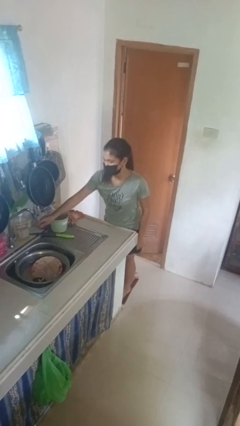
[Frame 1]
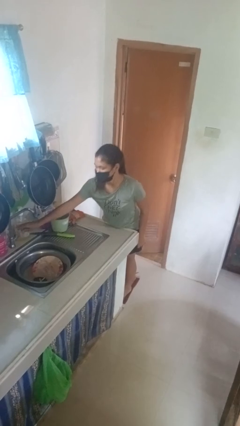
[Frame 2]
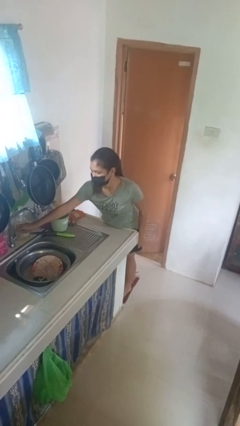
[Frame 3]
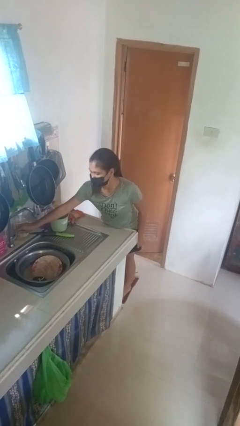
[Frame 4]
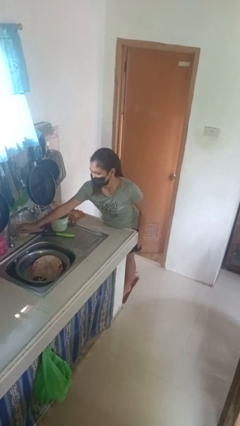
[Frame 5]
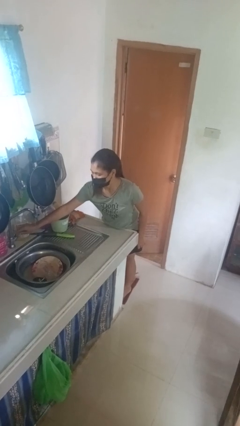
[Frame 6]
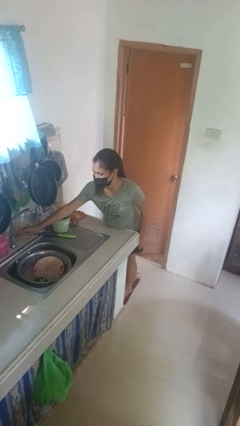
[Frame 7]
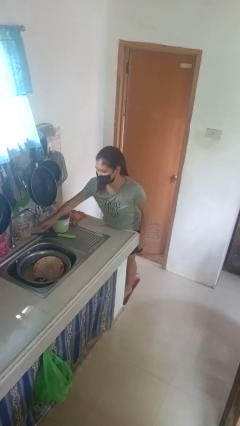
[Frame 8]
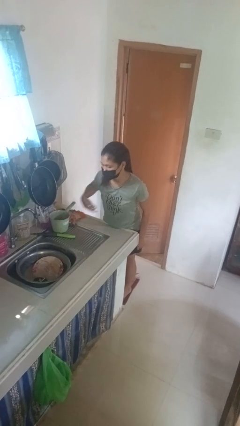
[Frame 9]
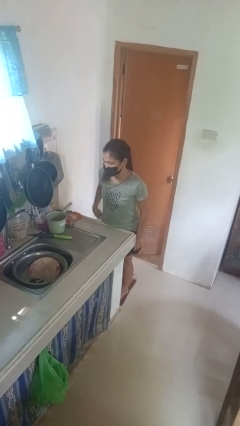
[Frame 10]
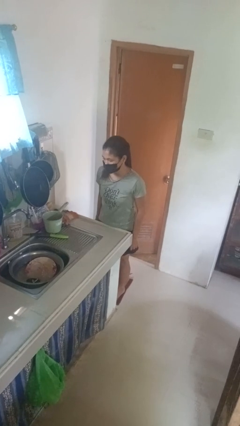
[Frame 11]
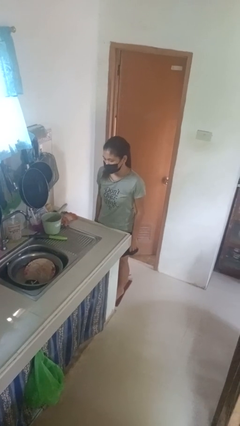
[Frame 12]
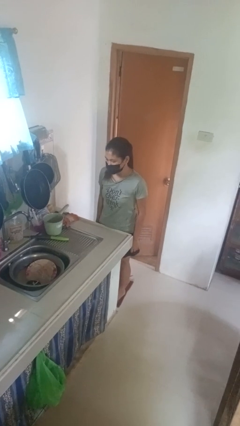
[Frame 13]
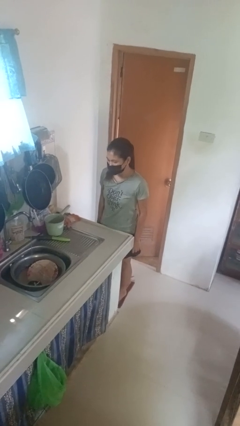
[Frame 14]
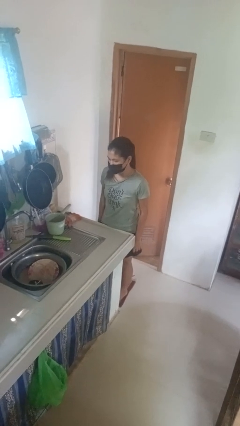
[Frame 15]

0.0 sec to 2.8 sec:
person turns on faucet

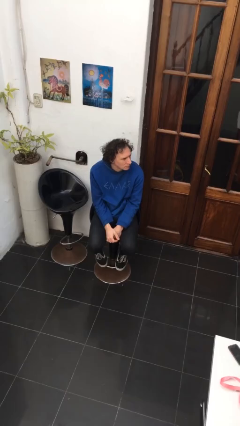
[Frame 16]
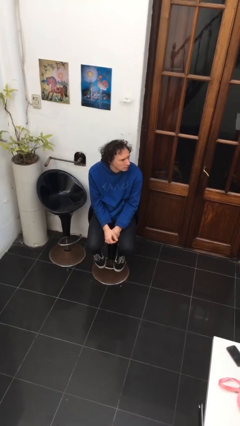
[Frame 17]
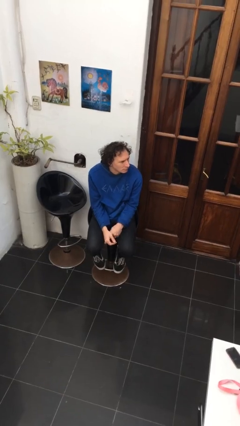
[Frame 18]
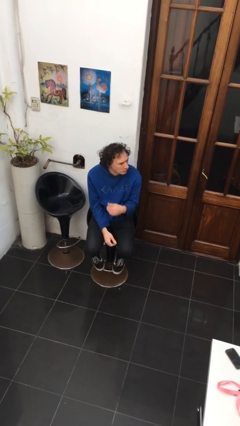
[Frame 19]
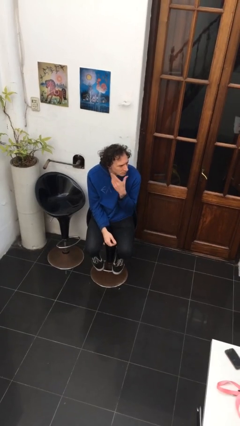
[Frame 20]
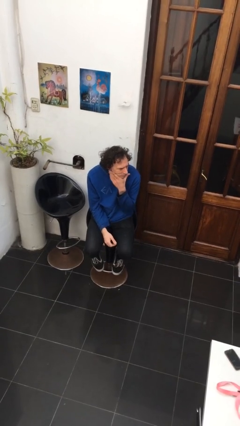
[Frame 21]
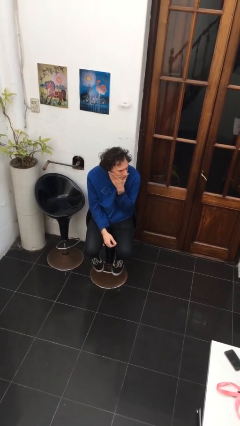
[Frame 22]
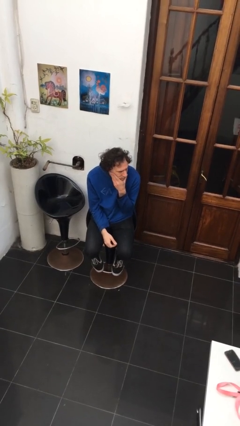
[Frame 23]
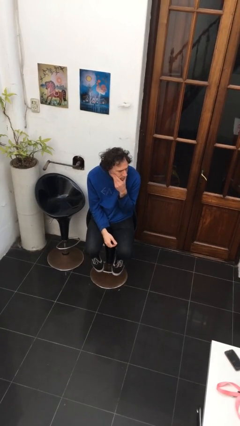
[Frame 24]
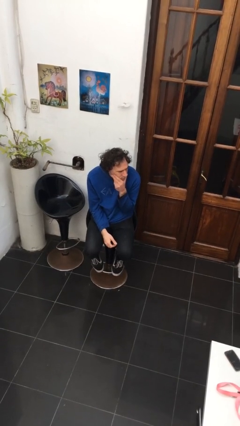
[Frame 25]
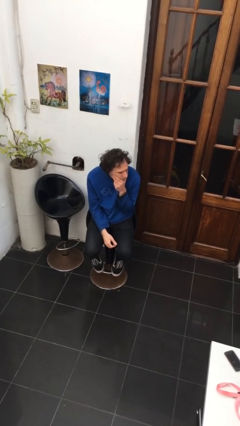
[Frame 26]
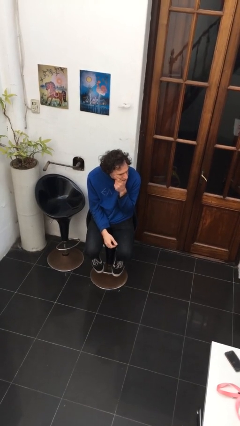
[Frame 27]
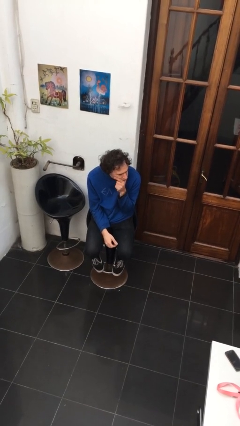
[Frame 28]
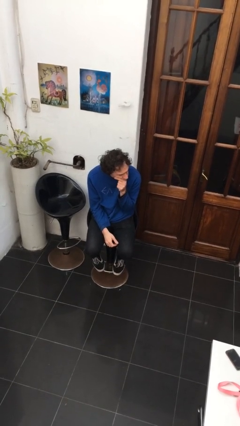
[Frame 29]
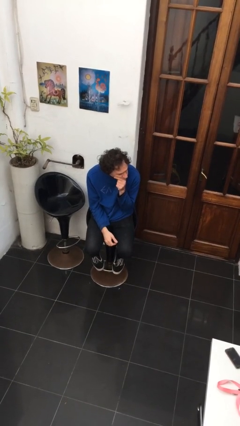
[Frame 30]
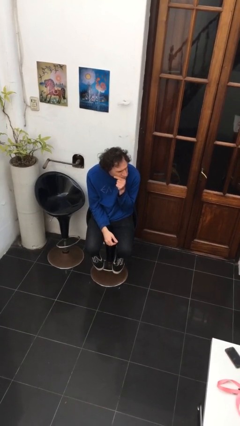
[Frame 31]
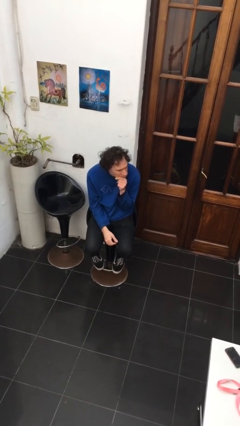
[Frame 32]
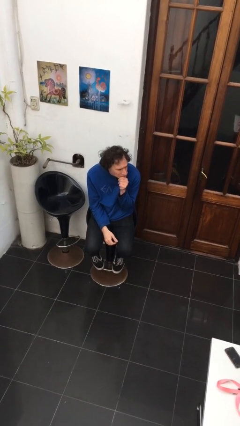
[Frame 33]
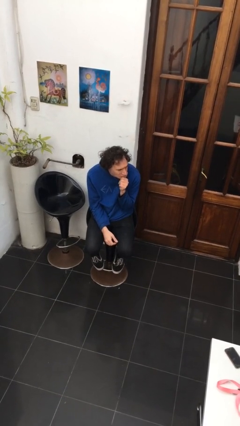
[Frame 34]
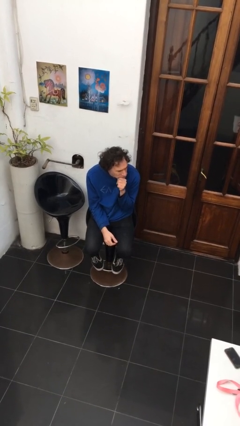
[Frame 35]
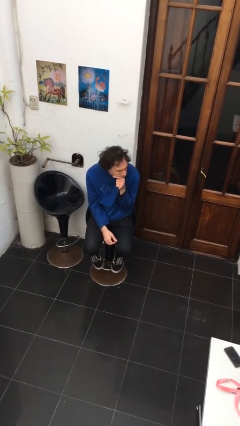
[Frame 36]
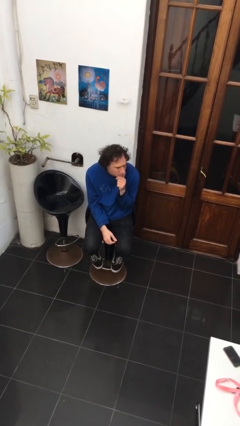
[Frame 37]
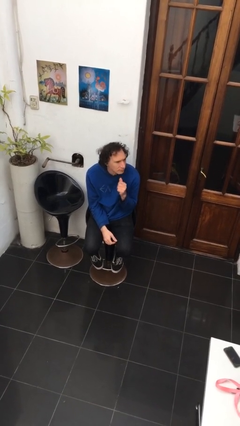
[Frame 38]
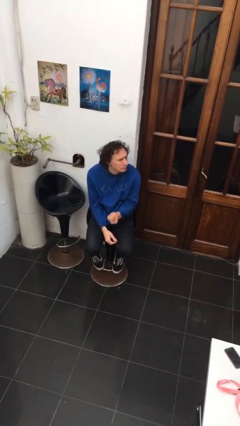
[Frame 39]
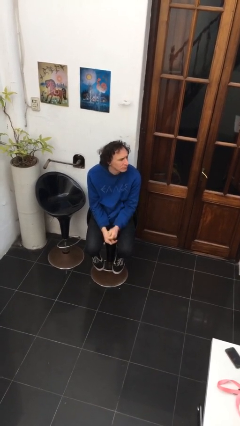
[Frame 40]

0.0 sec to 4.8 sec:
person strokes chin

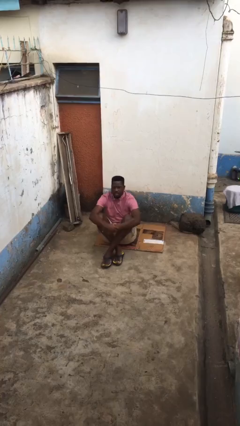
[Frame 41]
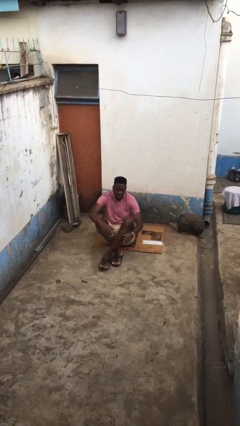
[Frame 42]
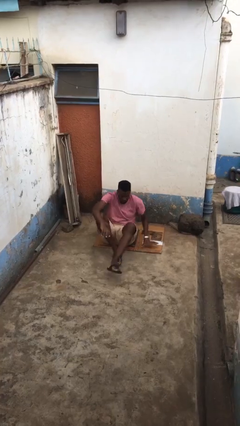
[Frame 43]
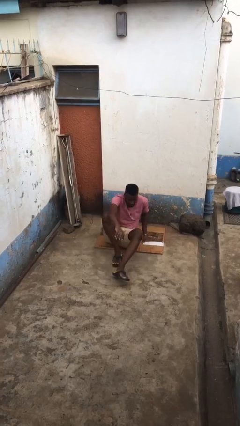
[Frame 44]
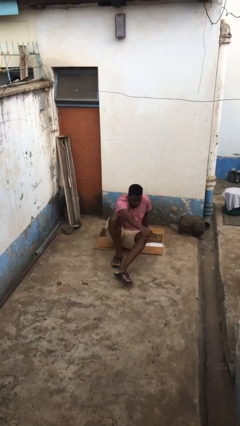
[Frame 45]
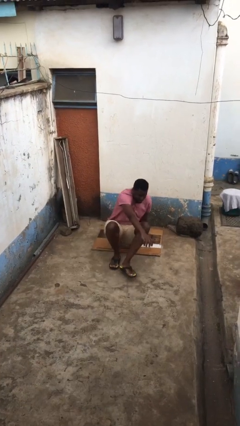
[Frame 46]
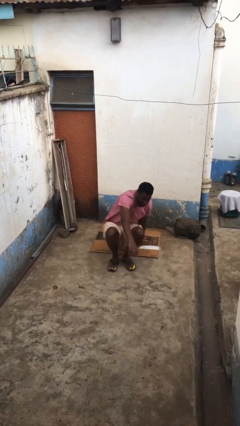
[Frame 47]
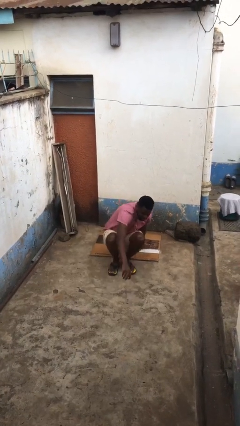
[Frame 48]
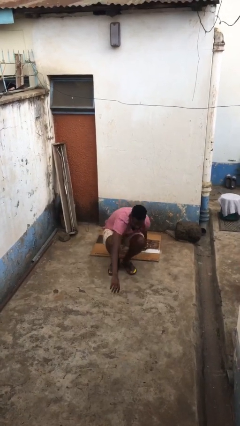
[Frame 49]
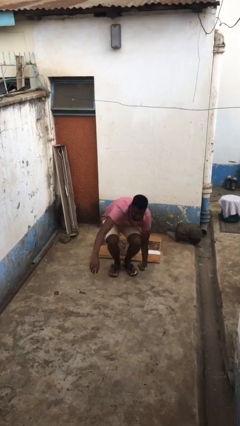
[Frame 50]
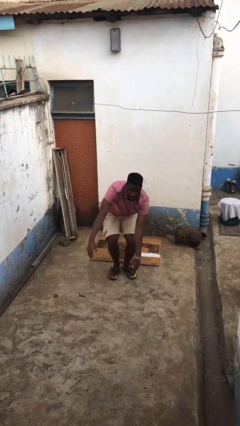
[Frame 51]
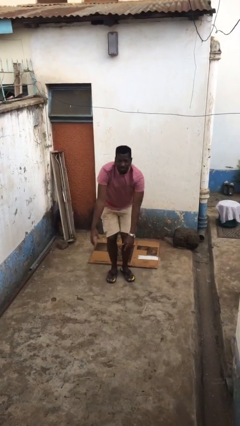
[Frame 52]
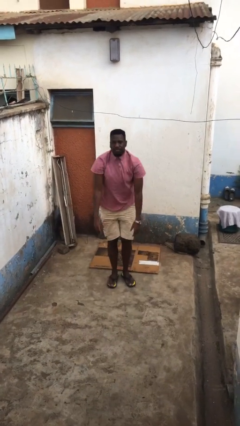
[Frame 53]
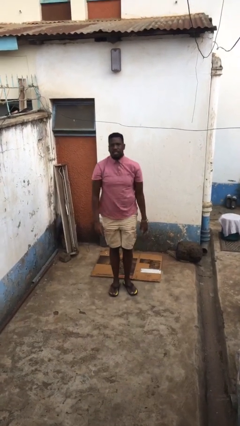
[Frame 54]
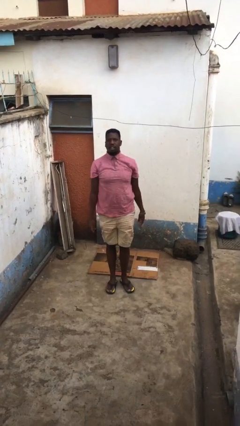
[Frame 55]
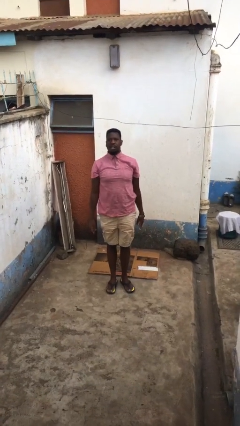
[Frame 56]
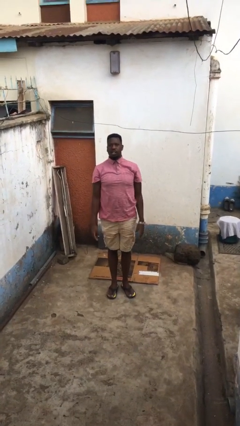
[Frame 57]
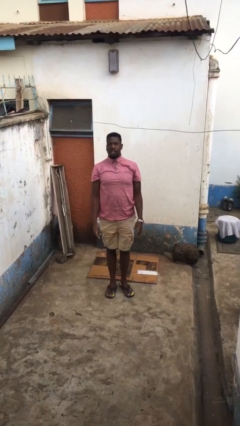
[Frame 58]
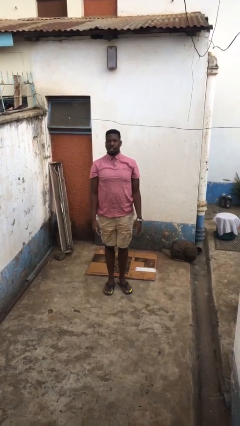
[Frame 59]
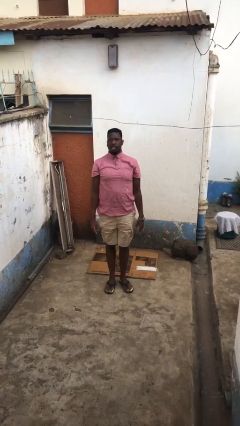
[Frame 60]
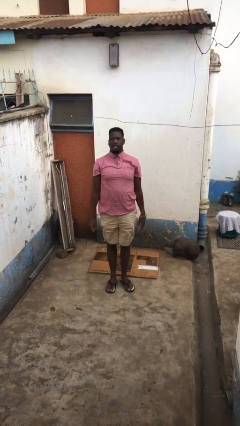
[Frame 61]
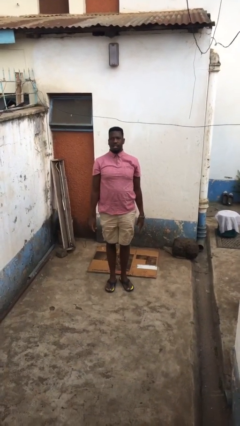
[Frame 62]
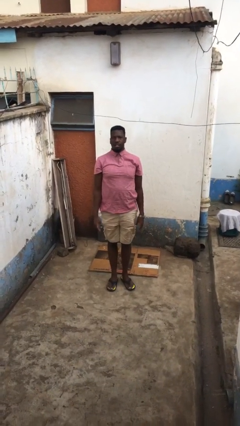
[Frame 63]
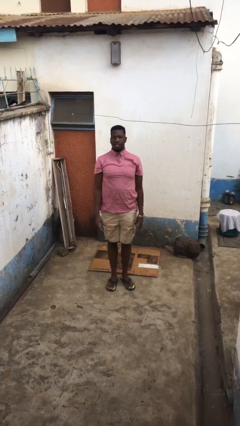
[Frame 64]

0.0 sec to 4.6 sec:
person stands up from floor

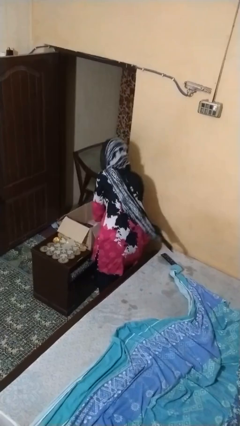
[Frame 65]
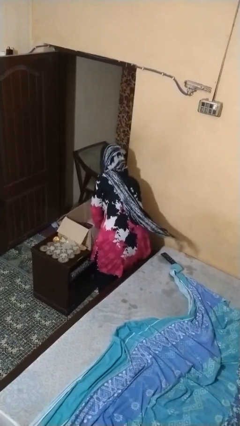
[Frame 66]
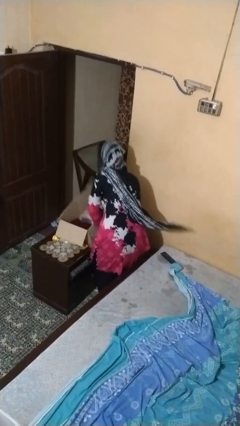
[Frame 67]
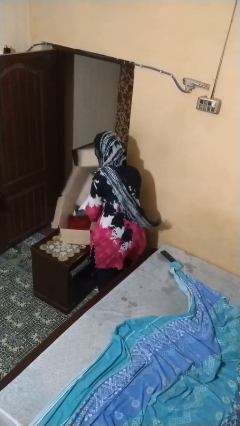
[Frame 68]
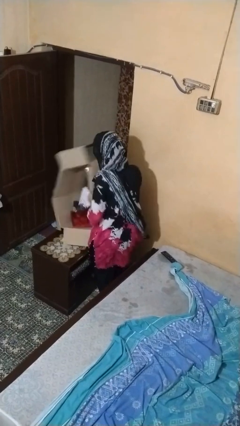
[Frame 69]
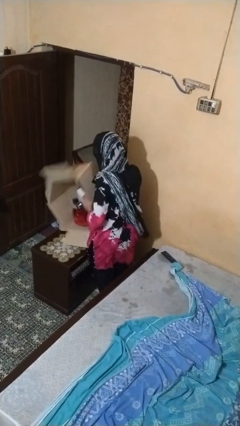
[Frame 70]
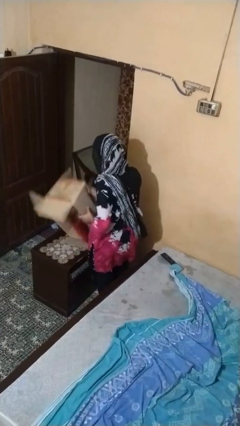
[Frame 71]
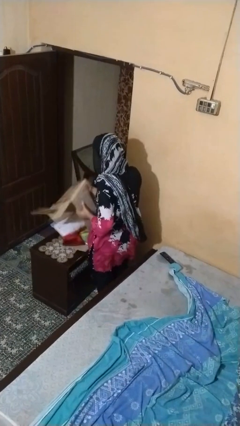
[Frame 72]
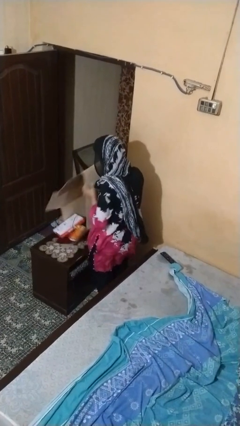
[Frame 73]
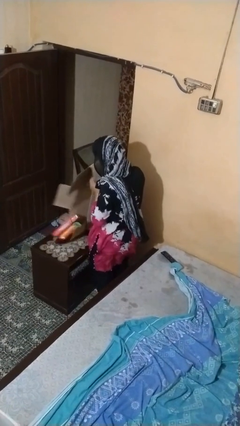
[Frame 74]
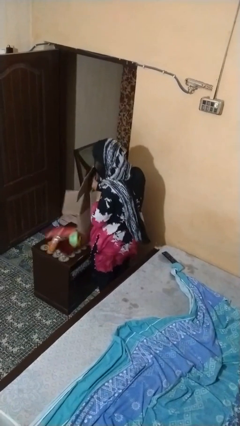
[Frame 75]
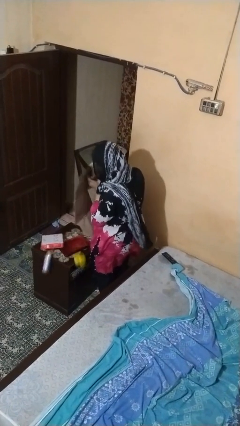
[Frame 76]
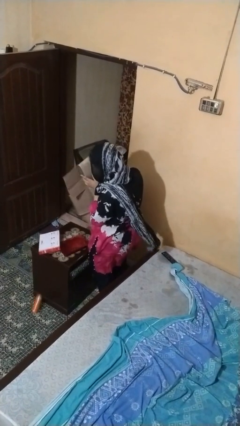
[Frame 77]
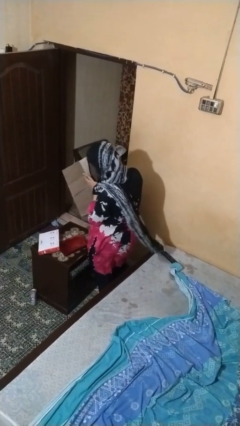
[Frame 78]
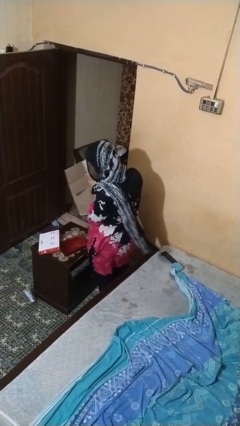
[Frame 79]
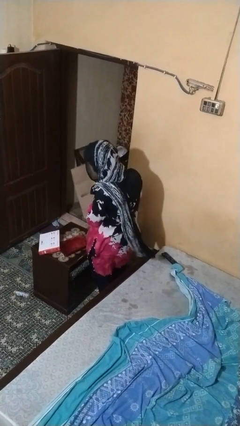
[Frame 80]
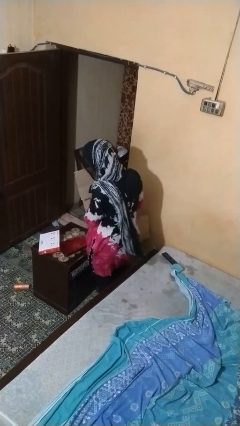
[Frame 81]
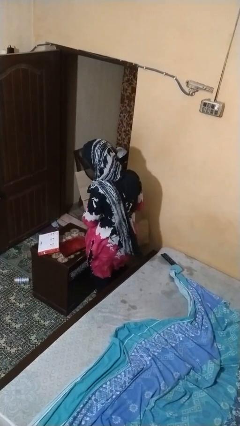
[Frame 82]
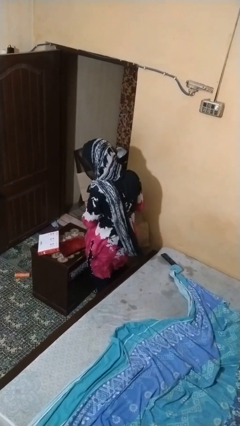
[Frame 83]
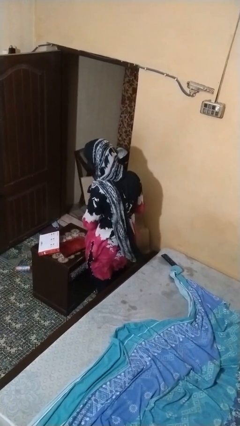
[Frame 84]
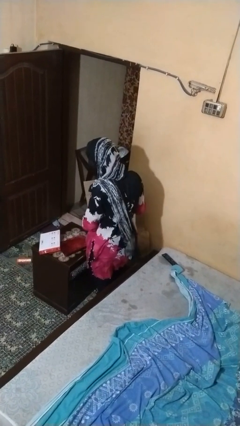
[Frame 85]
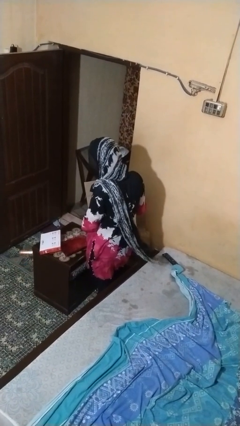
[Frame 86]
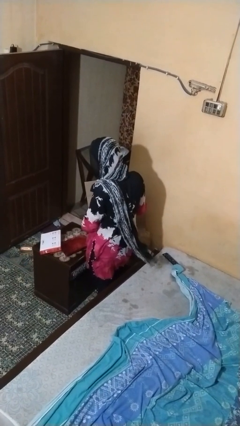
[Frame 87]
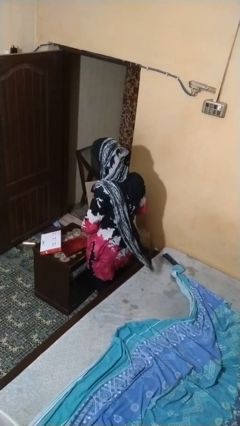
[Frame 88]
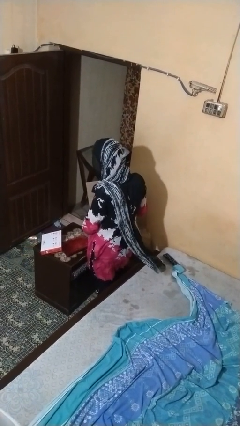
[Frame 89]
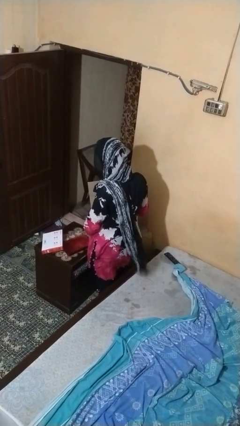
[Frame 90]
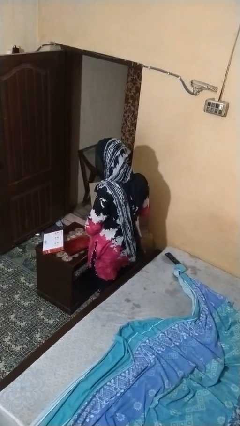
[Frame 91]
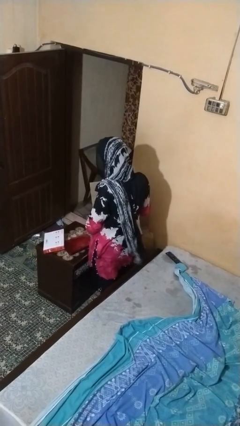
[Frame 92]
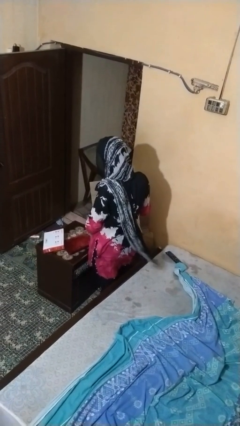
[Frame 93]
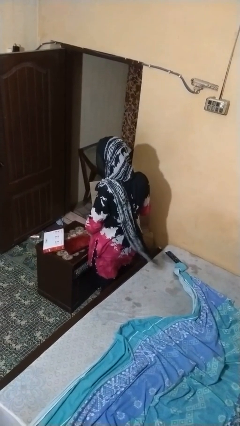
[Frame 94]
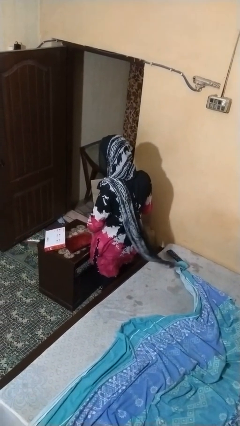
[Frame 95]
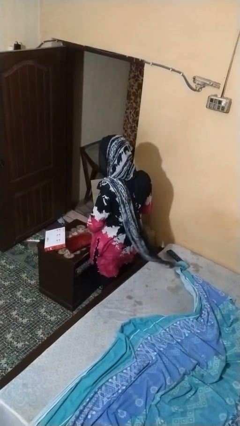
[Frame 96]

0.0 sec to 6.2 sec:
person unloads box onto table
